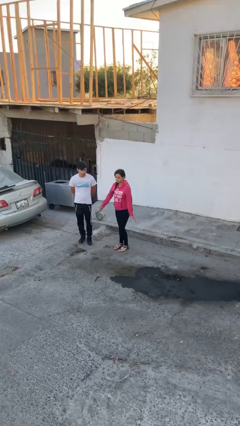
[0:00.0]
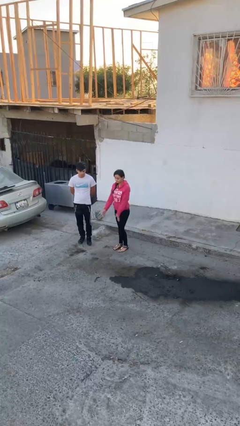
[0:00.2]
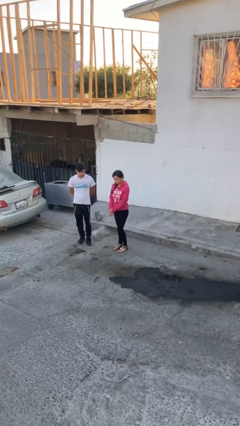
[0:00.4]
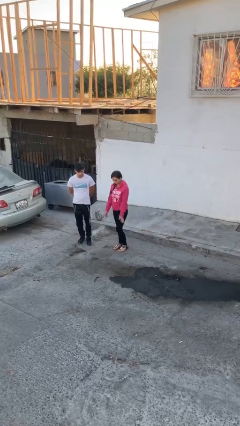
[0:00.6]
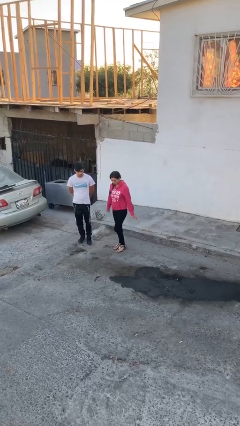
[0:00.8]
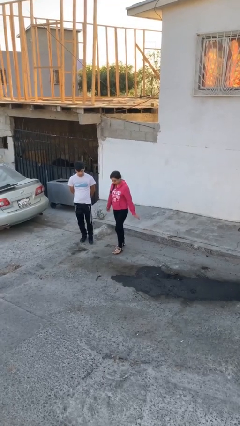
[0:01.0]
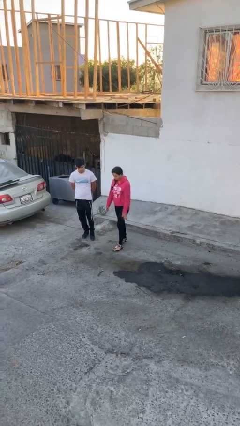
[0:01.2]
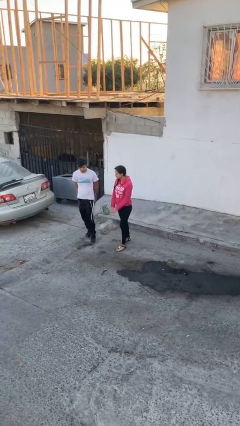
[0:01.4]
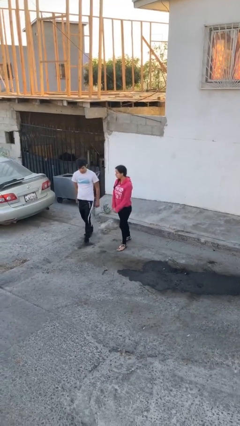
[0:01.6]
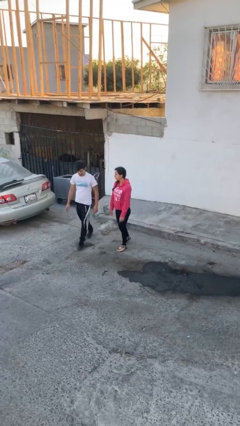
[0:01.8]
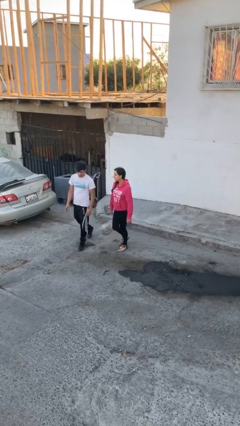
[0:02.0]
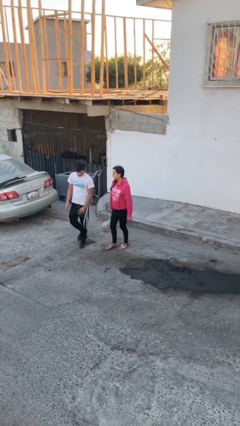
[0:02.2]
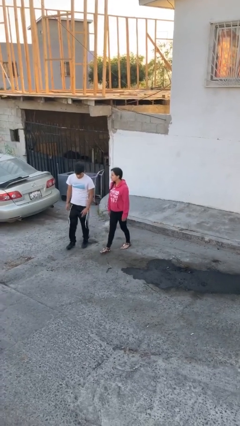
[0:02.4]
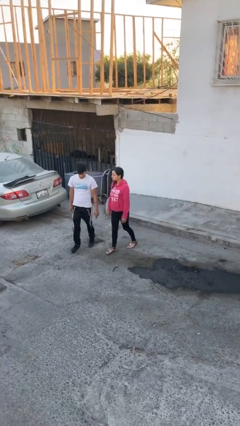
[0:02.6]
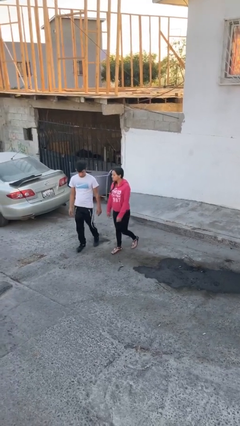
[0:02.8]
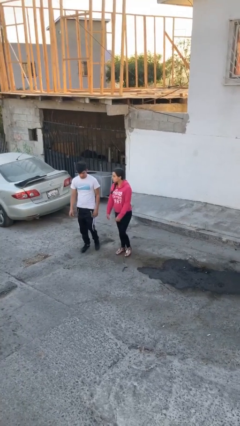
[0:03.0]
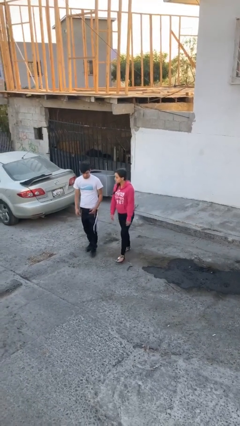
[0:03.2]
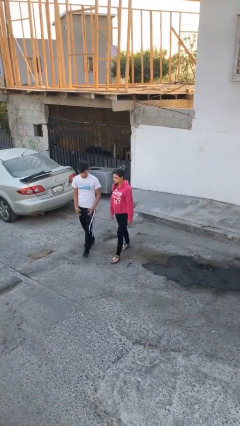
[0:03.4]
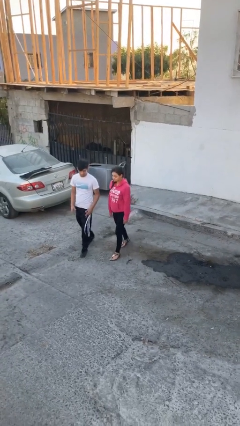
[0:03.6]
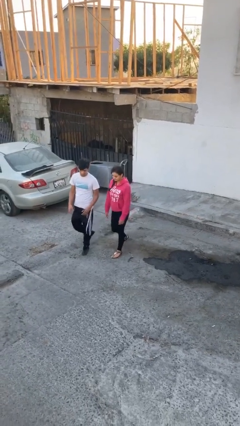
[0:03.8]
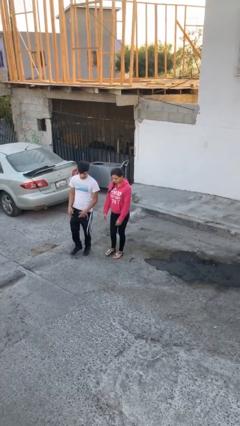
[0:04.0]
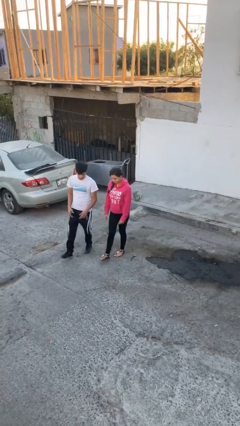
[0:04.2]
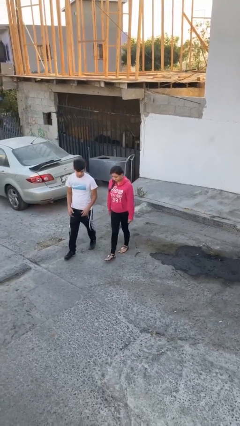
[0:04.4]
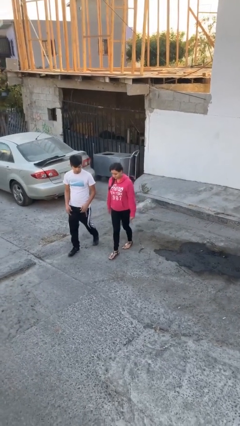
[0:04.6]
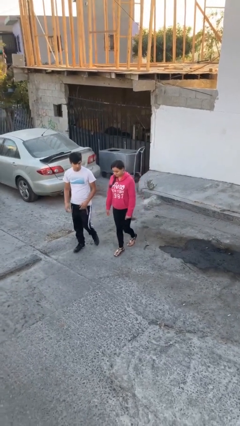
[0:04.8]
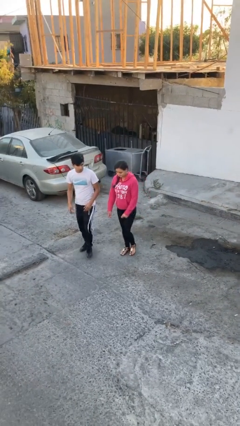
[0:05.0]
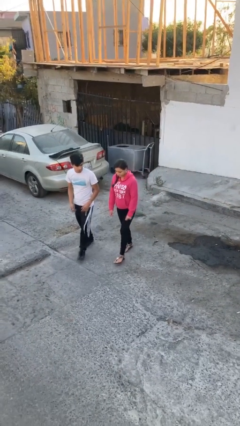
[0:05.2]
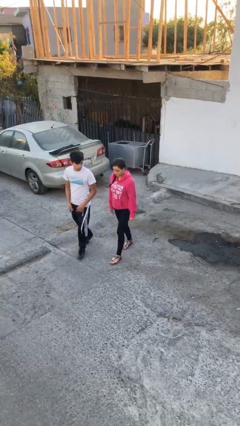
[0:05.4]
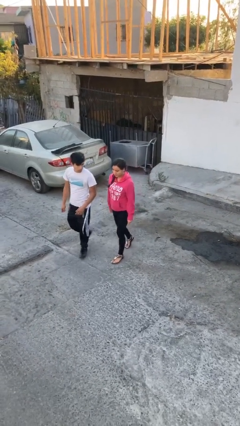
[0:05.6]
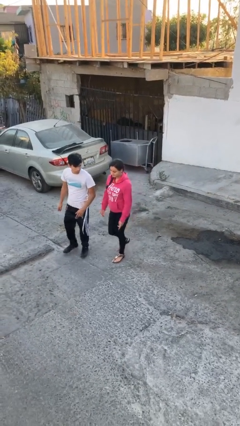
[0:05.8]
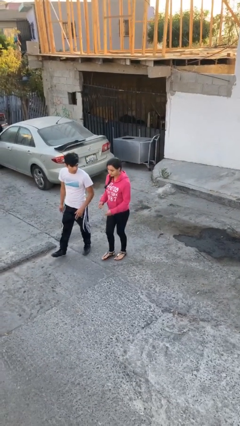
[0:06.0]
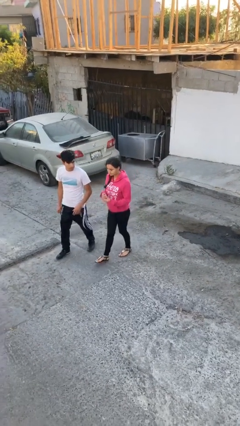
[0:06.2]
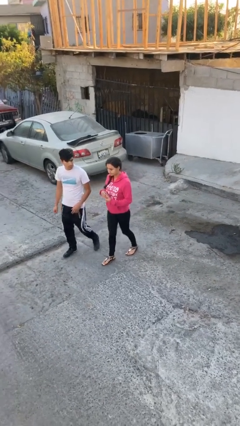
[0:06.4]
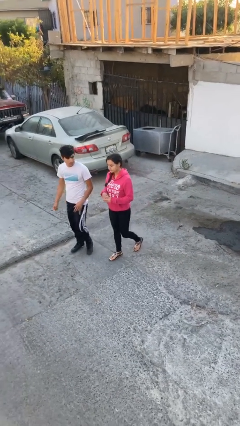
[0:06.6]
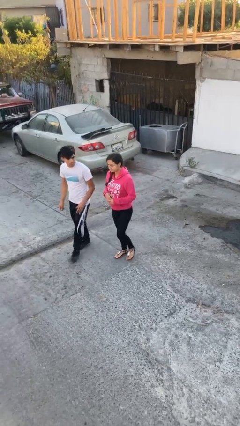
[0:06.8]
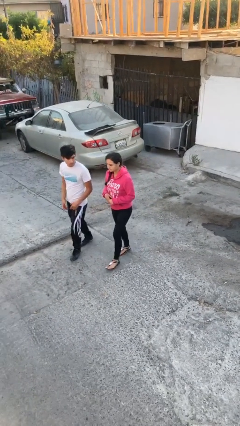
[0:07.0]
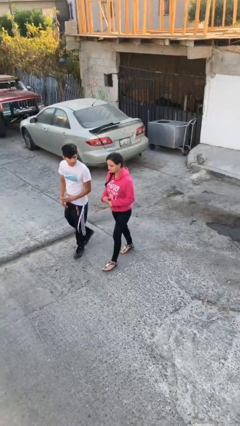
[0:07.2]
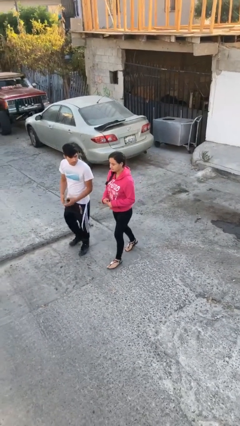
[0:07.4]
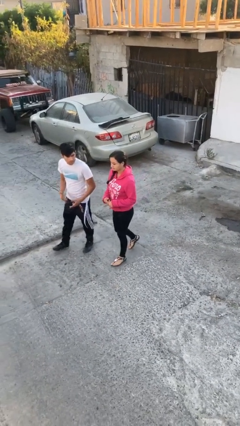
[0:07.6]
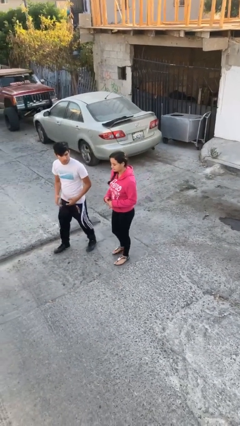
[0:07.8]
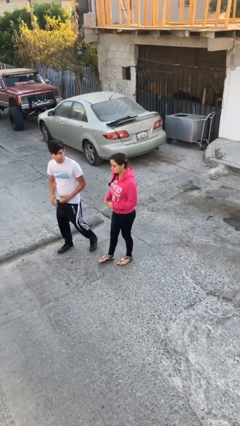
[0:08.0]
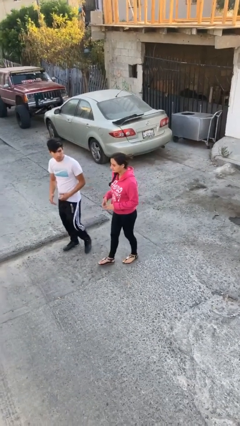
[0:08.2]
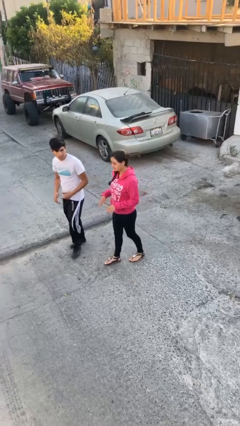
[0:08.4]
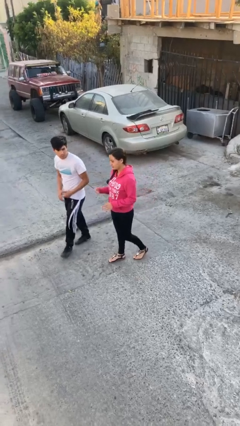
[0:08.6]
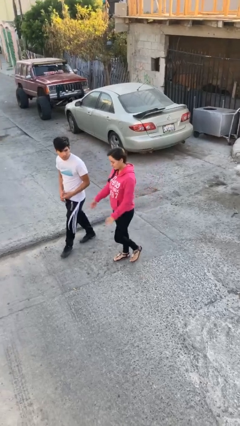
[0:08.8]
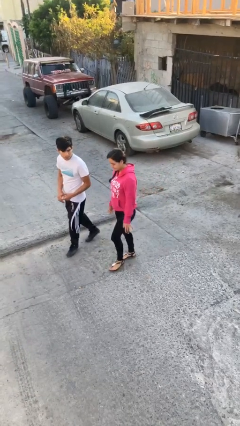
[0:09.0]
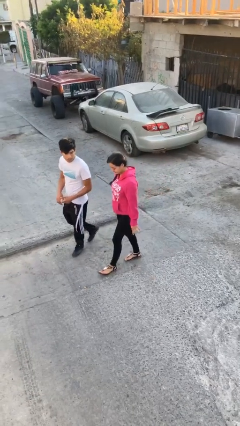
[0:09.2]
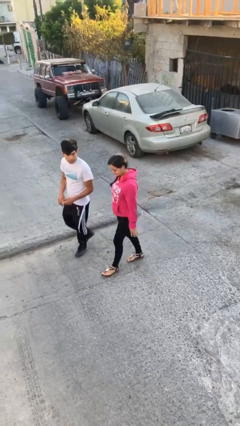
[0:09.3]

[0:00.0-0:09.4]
person talks to person

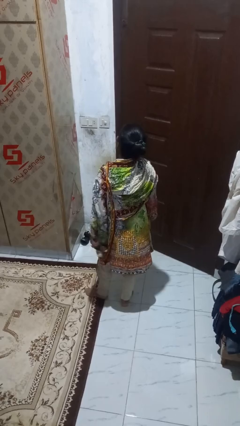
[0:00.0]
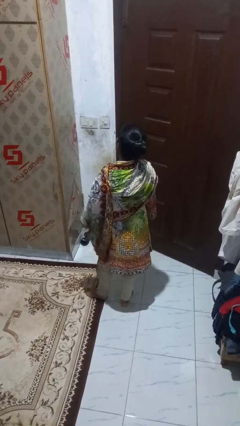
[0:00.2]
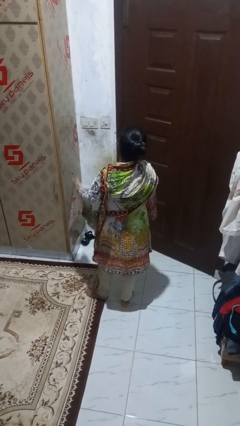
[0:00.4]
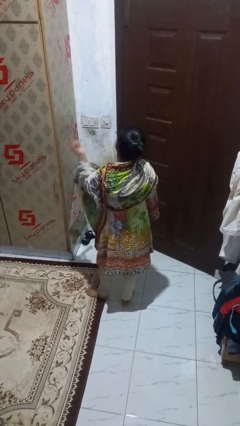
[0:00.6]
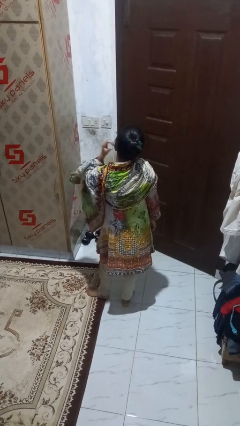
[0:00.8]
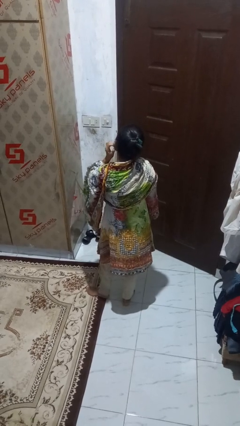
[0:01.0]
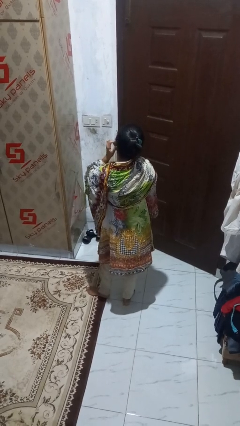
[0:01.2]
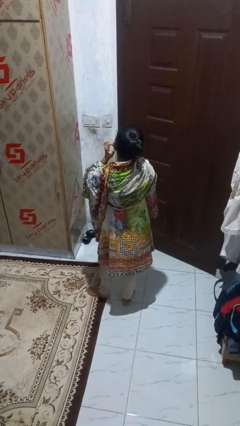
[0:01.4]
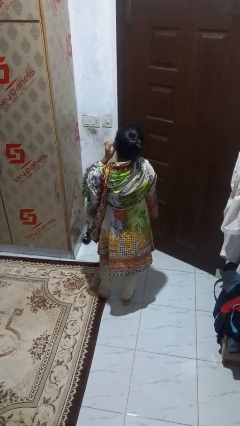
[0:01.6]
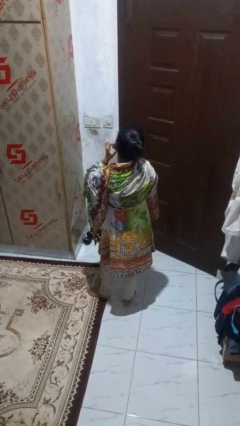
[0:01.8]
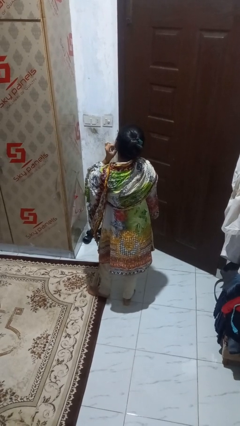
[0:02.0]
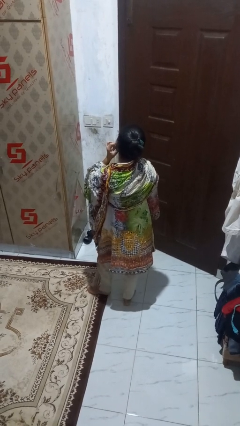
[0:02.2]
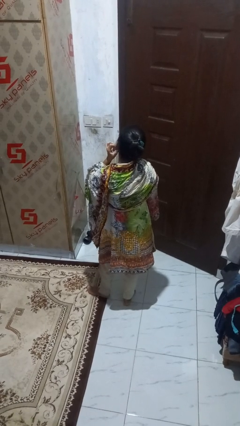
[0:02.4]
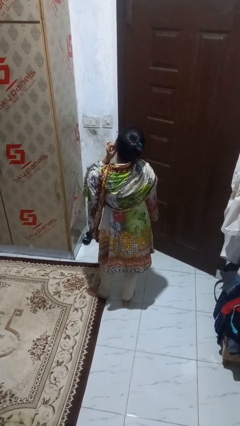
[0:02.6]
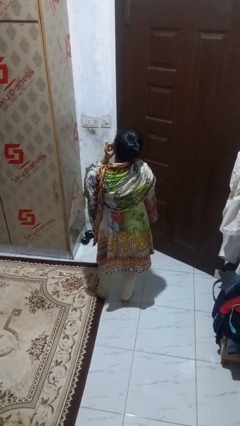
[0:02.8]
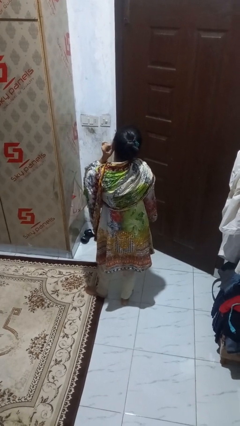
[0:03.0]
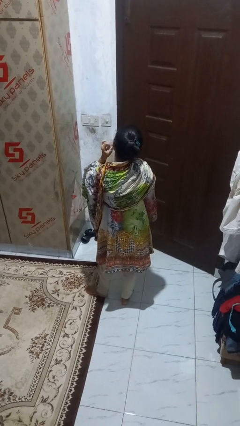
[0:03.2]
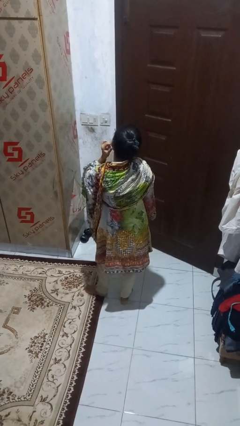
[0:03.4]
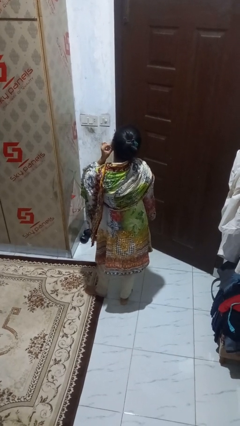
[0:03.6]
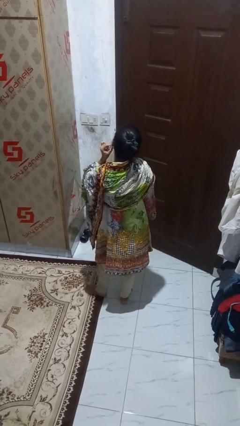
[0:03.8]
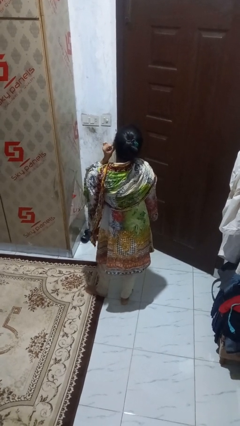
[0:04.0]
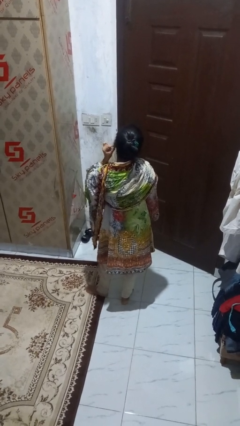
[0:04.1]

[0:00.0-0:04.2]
person touches earlobe

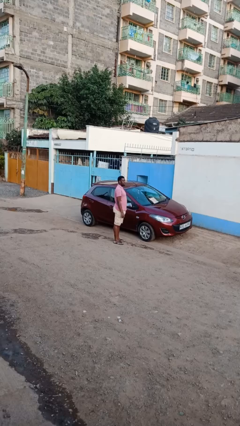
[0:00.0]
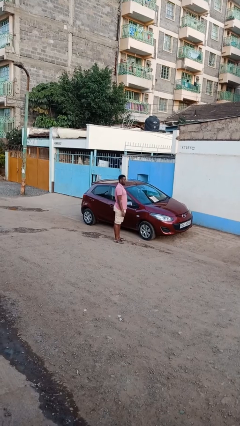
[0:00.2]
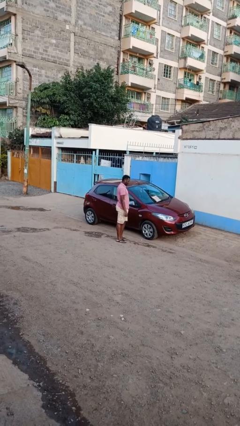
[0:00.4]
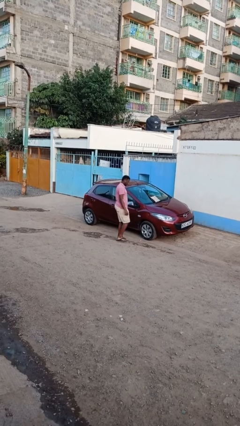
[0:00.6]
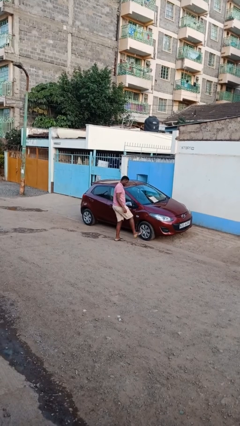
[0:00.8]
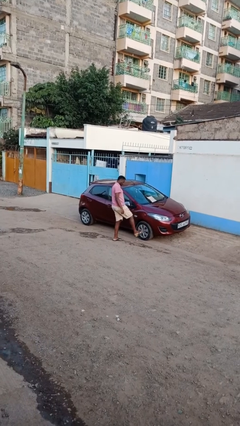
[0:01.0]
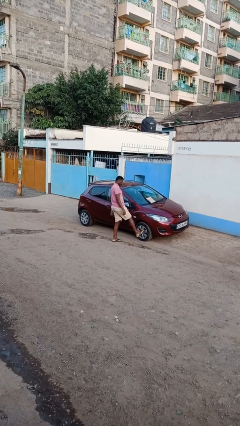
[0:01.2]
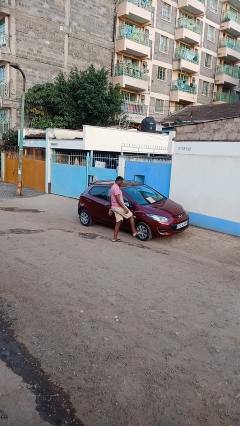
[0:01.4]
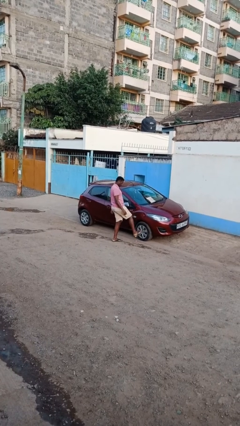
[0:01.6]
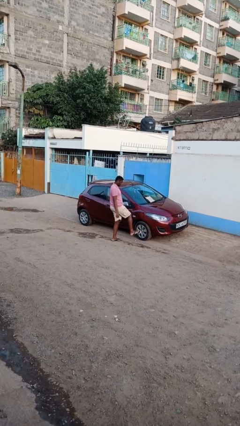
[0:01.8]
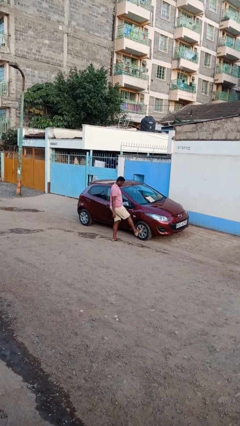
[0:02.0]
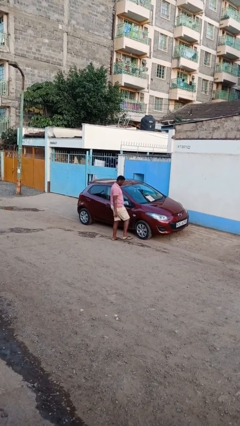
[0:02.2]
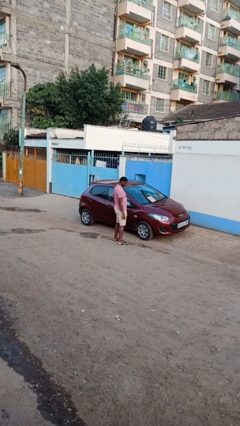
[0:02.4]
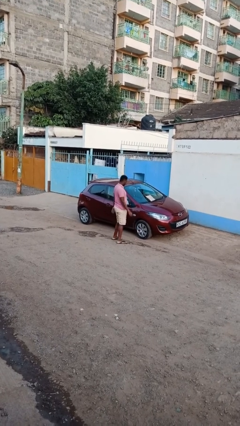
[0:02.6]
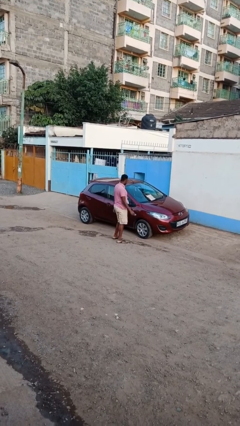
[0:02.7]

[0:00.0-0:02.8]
person kicks car tires

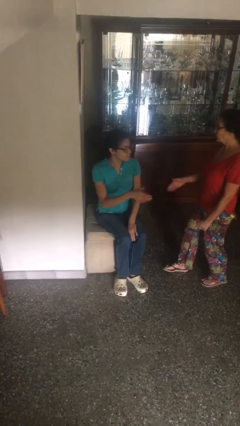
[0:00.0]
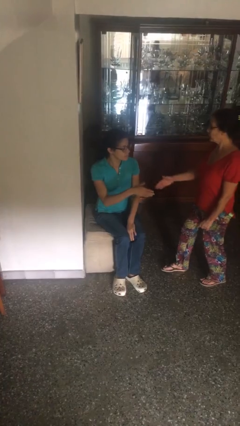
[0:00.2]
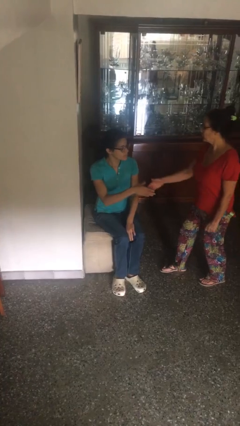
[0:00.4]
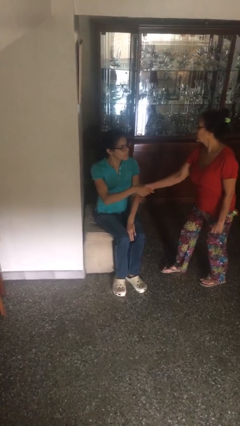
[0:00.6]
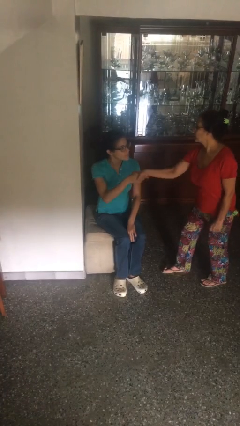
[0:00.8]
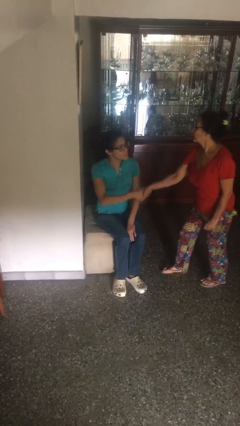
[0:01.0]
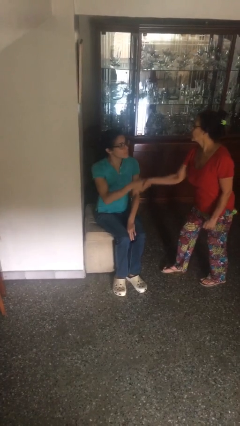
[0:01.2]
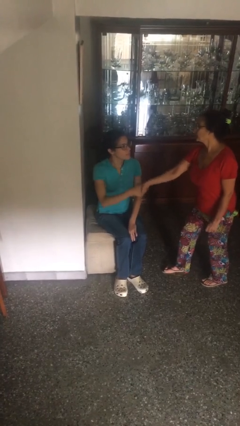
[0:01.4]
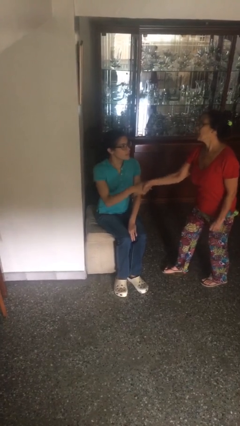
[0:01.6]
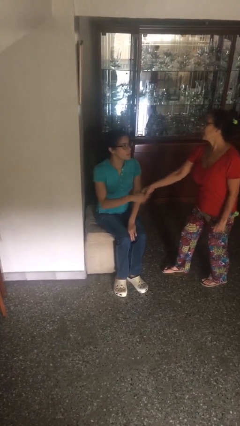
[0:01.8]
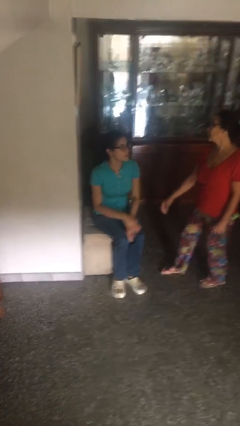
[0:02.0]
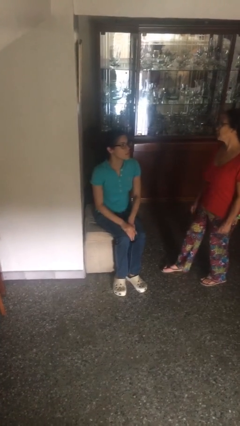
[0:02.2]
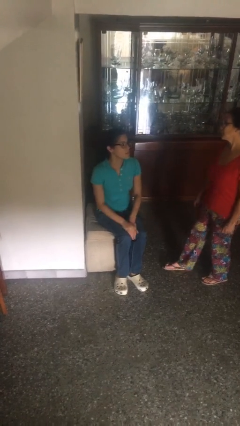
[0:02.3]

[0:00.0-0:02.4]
person shakes hand
